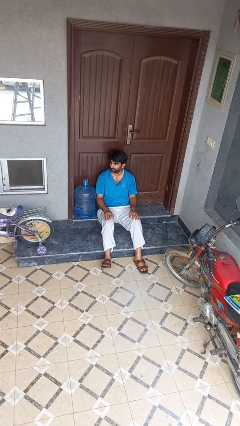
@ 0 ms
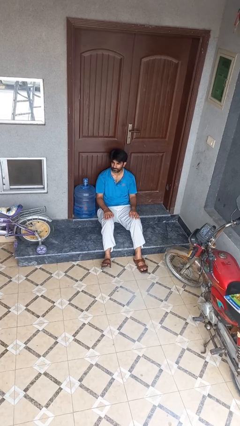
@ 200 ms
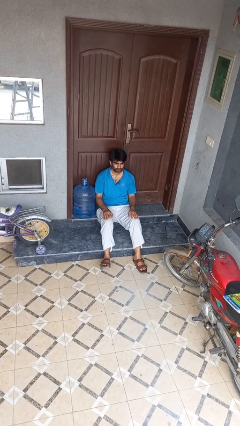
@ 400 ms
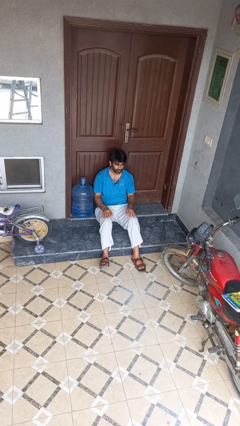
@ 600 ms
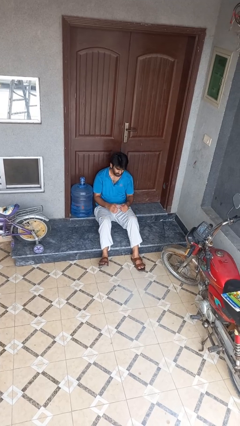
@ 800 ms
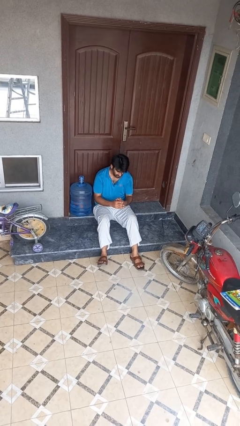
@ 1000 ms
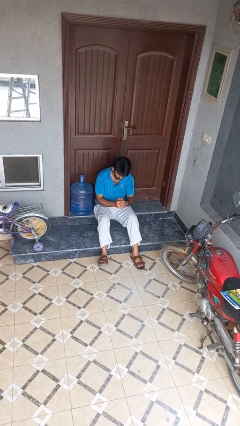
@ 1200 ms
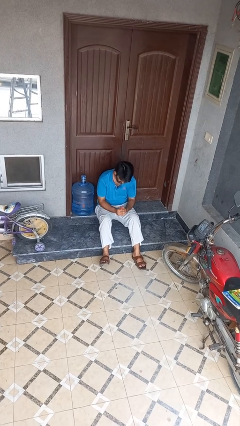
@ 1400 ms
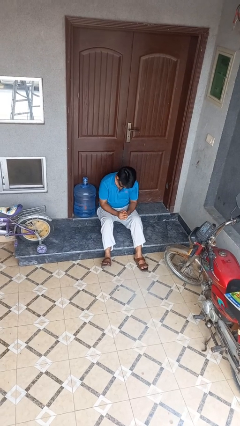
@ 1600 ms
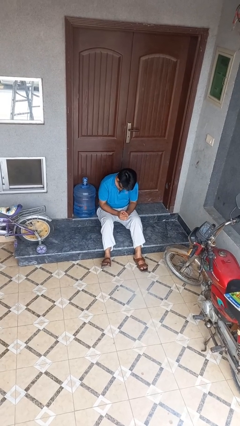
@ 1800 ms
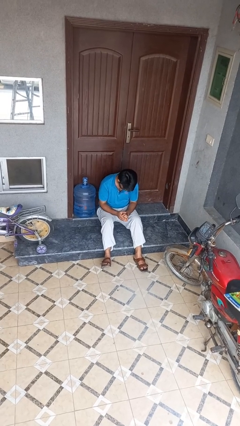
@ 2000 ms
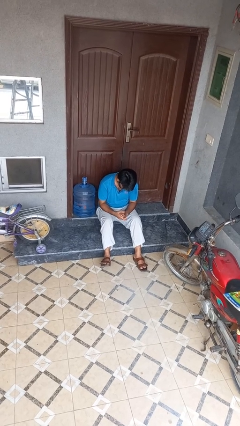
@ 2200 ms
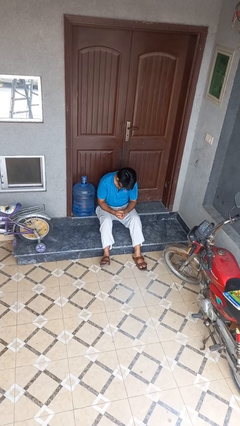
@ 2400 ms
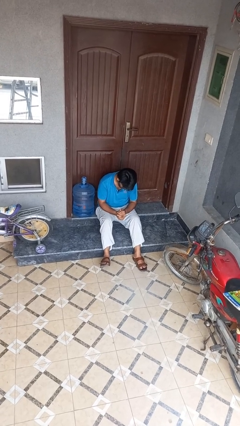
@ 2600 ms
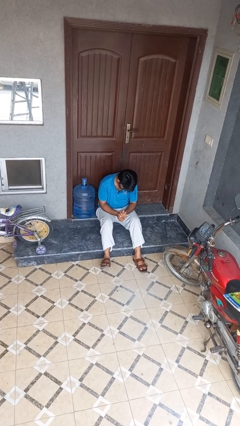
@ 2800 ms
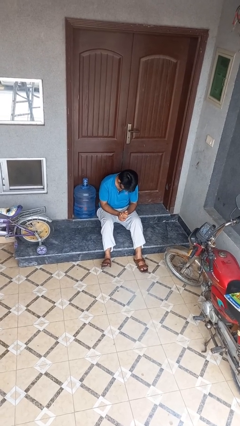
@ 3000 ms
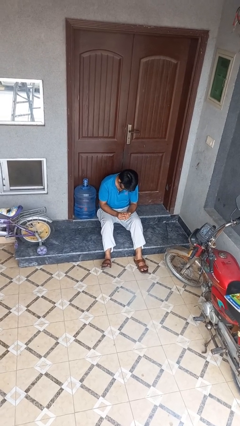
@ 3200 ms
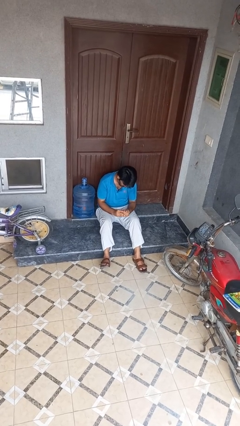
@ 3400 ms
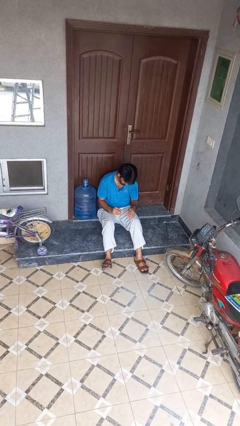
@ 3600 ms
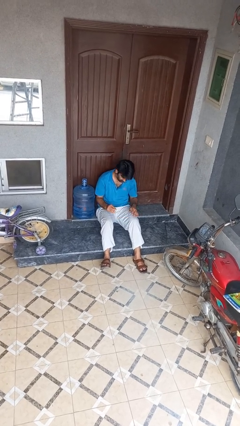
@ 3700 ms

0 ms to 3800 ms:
person looks at hands in lap

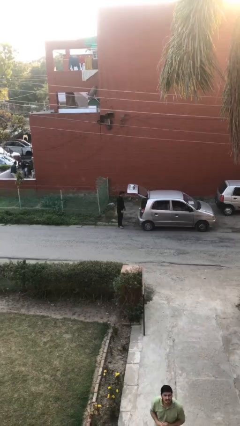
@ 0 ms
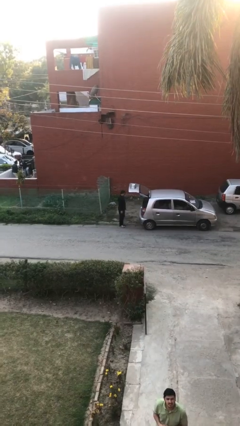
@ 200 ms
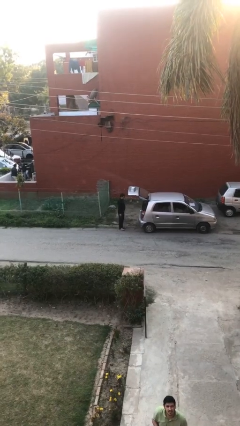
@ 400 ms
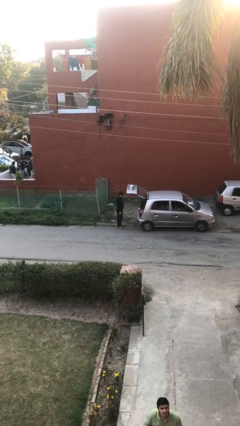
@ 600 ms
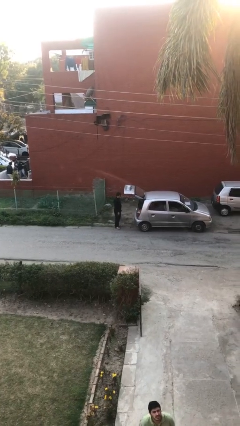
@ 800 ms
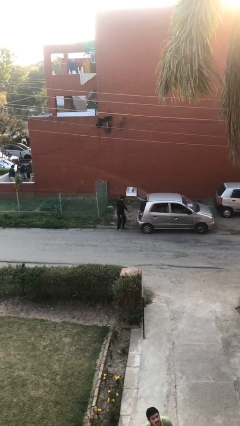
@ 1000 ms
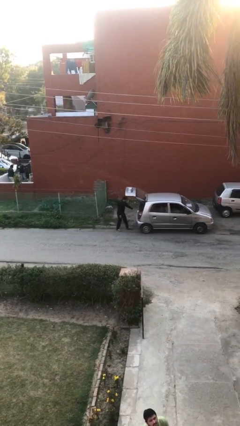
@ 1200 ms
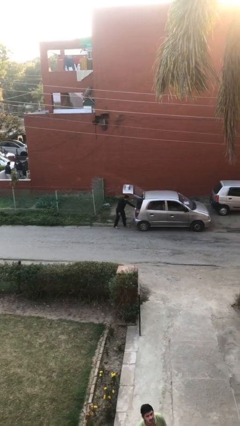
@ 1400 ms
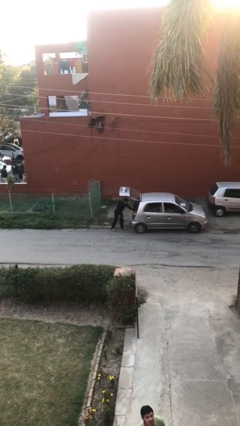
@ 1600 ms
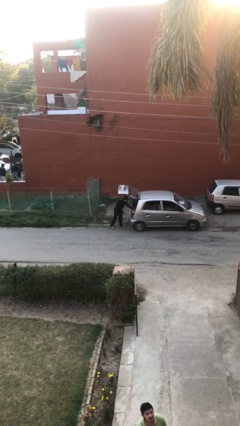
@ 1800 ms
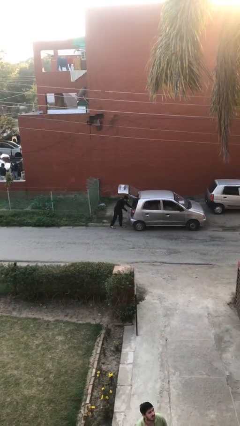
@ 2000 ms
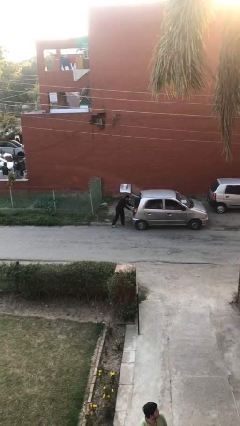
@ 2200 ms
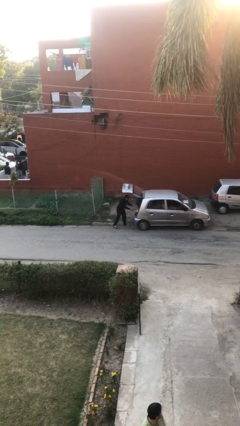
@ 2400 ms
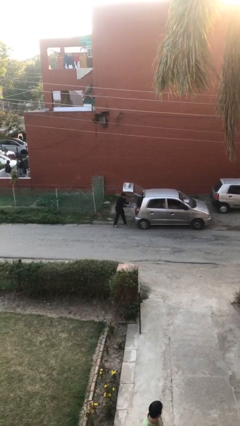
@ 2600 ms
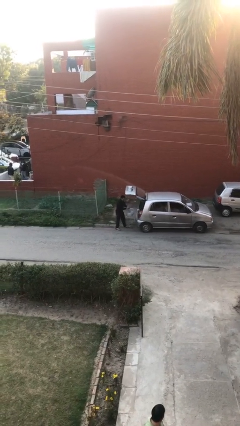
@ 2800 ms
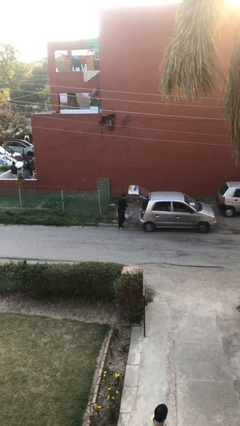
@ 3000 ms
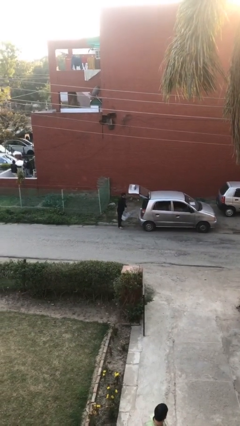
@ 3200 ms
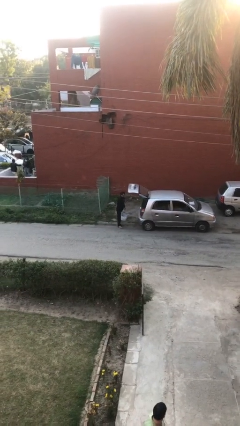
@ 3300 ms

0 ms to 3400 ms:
person unloads car

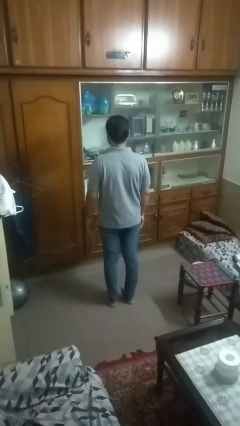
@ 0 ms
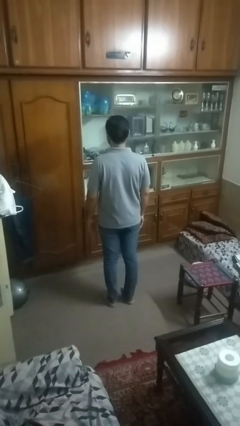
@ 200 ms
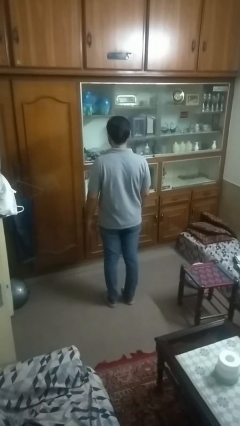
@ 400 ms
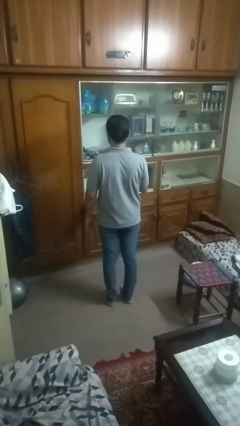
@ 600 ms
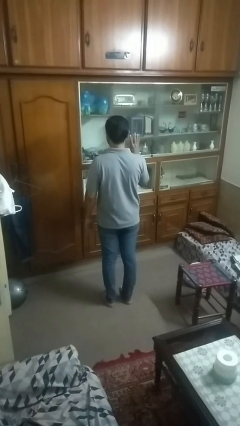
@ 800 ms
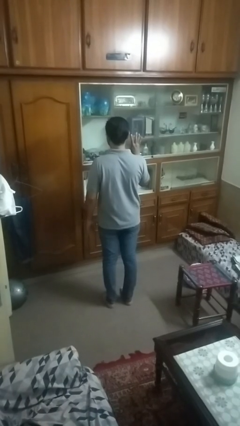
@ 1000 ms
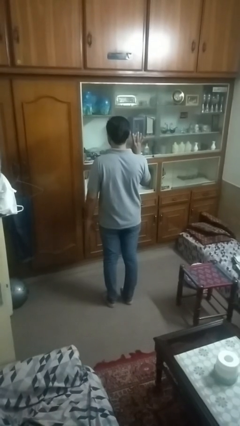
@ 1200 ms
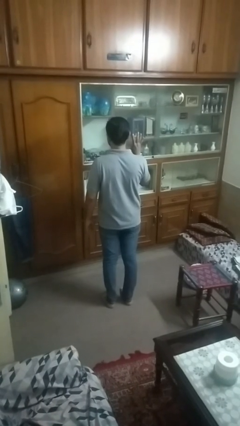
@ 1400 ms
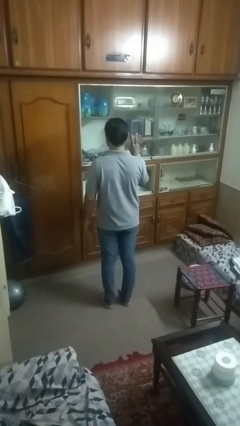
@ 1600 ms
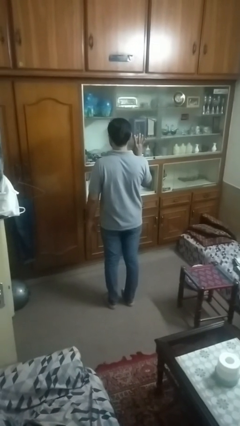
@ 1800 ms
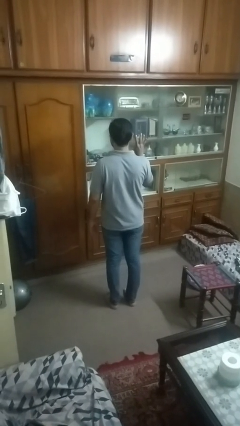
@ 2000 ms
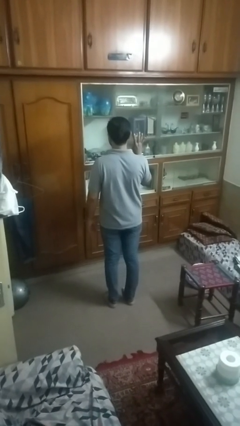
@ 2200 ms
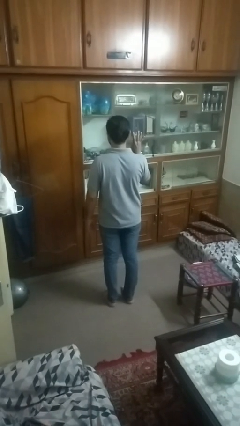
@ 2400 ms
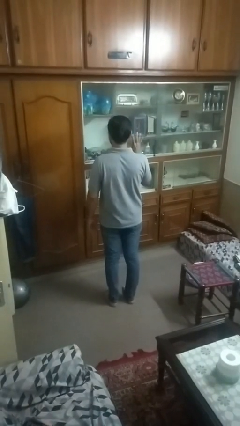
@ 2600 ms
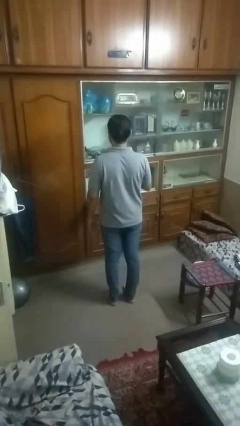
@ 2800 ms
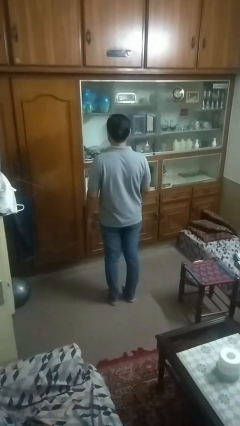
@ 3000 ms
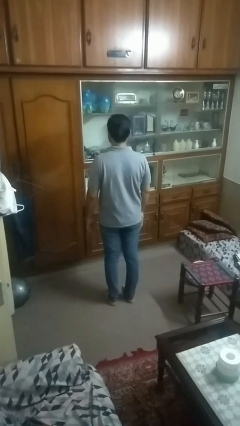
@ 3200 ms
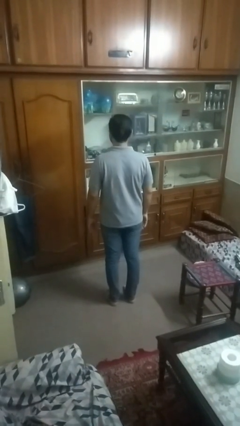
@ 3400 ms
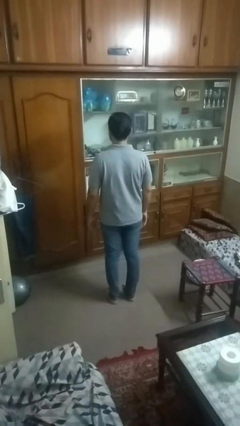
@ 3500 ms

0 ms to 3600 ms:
person gestures number four

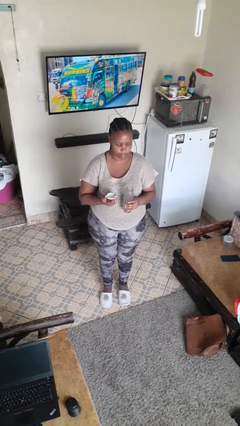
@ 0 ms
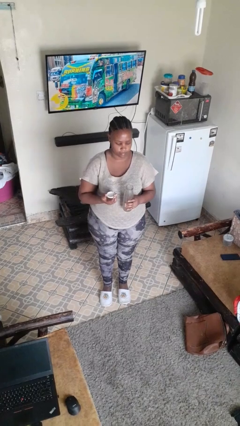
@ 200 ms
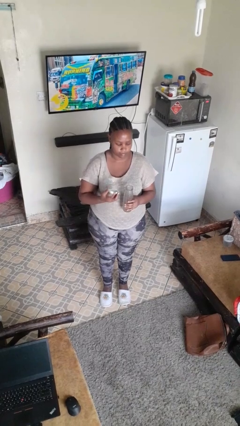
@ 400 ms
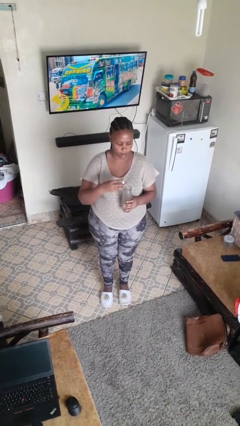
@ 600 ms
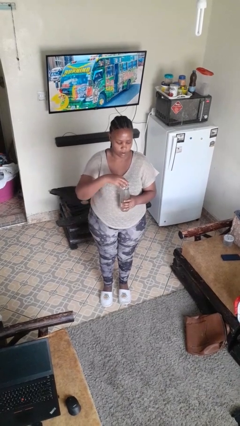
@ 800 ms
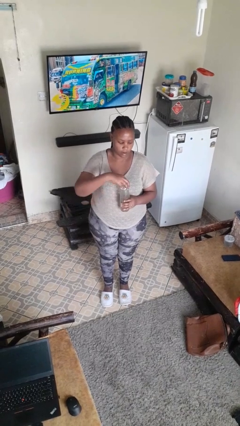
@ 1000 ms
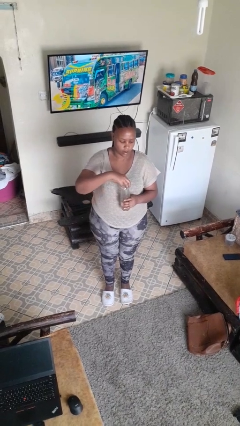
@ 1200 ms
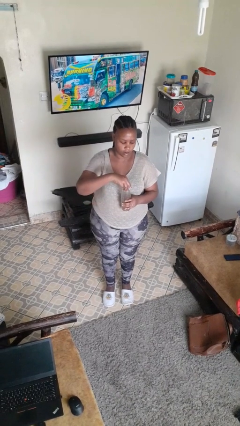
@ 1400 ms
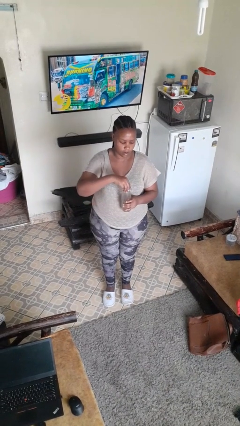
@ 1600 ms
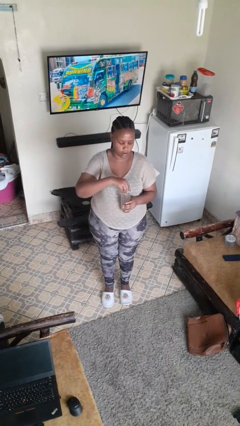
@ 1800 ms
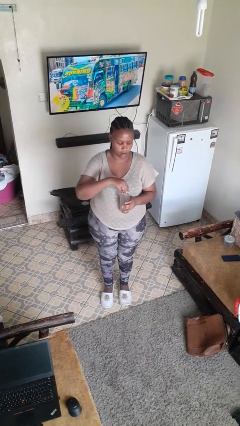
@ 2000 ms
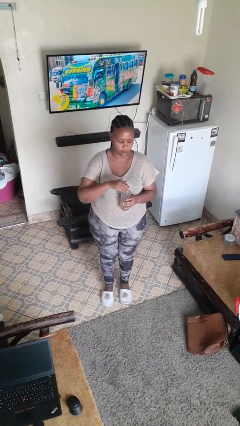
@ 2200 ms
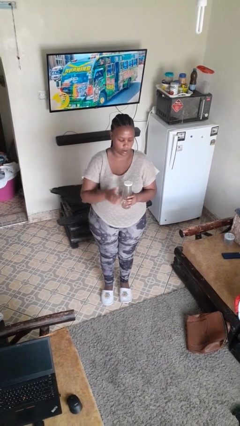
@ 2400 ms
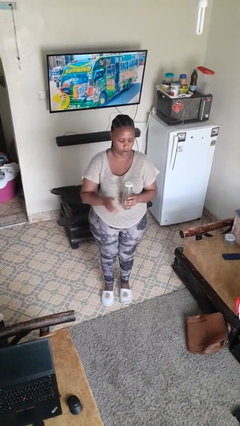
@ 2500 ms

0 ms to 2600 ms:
person screws lid to bottle

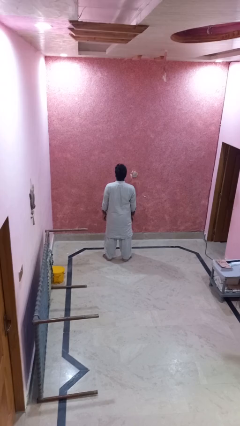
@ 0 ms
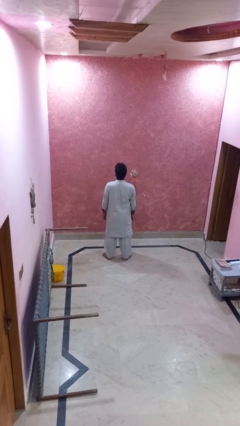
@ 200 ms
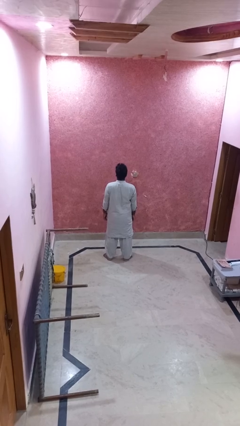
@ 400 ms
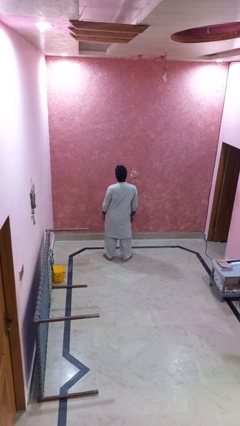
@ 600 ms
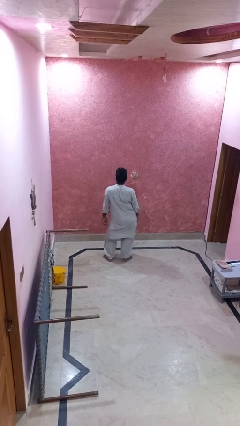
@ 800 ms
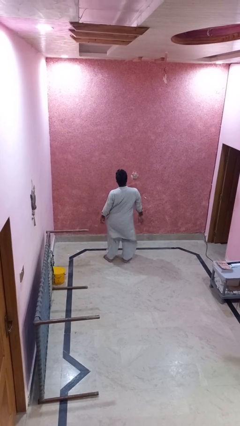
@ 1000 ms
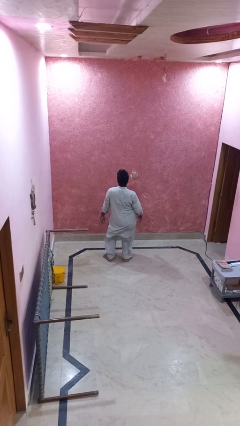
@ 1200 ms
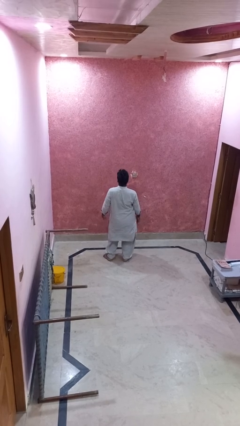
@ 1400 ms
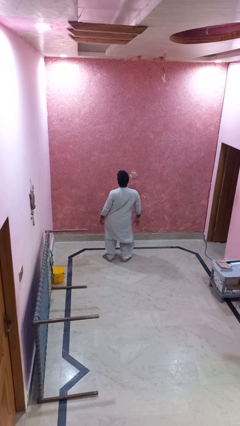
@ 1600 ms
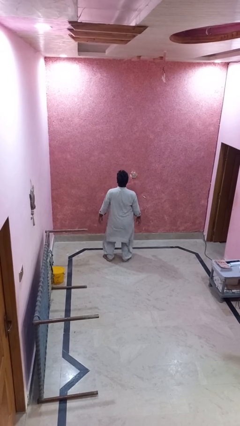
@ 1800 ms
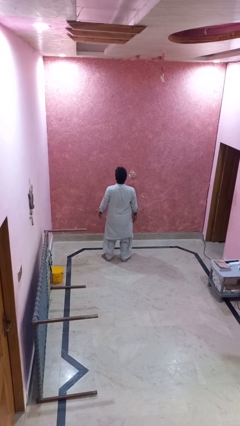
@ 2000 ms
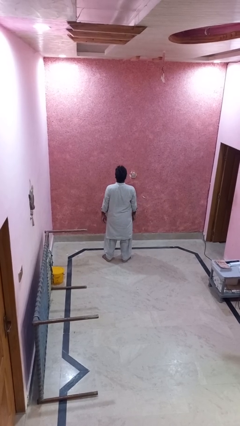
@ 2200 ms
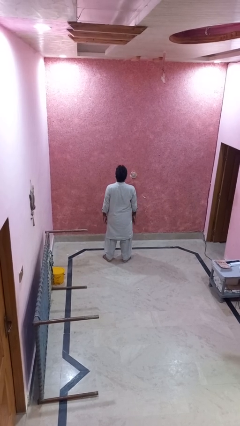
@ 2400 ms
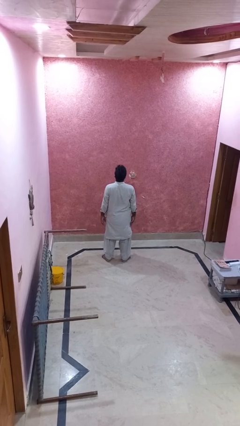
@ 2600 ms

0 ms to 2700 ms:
person wiggles hips

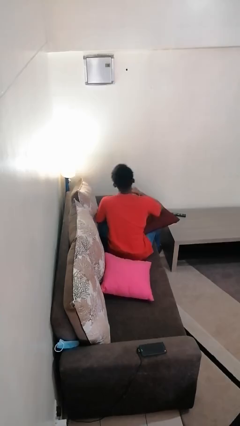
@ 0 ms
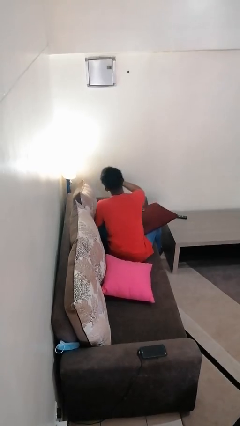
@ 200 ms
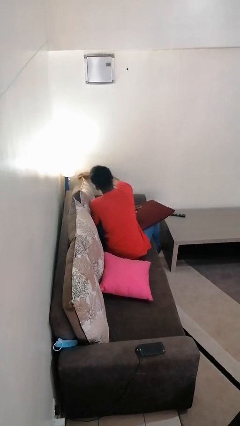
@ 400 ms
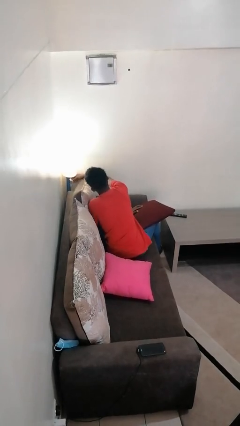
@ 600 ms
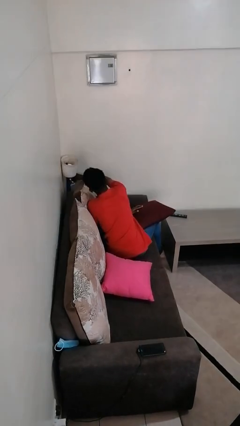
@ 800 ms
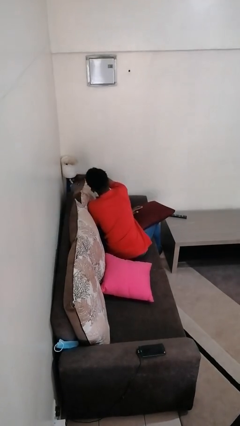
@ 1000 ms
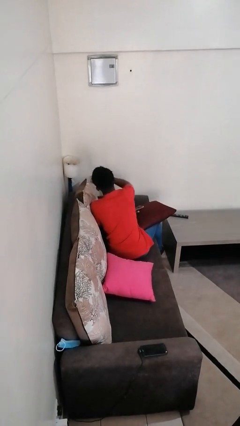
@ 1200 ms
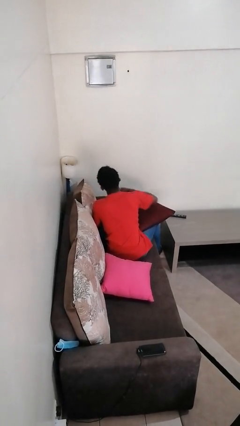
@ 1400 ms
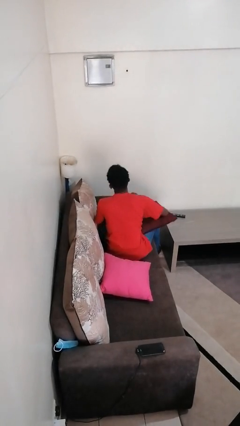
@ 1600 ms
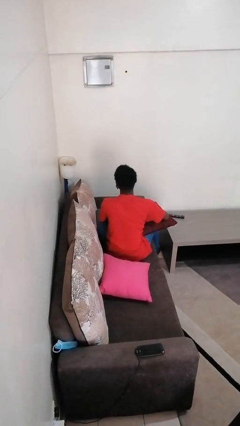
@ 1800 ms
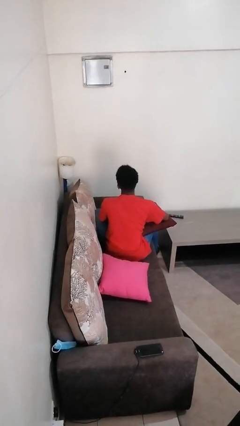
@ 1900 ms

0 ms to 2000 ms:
person turns off lamp
